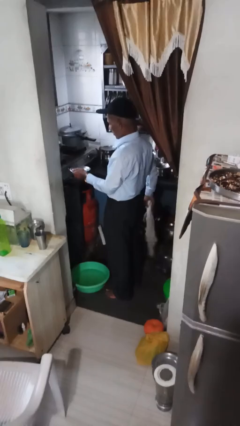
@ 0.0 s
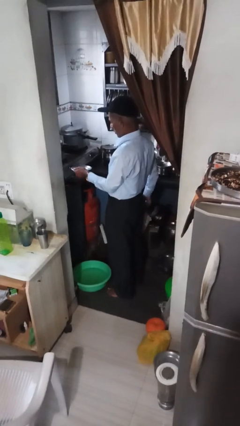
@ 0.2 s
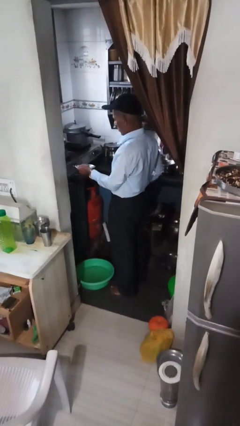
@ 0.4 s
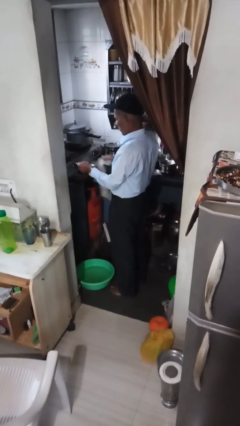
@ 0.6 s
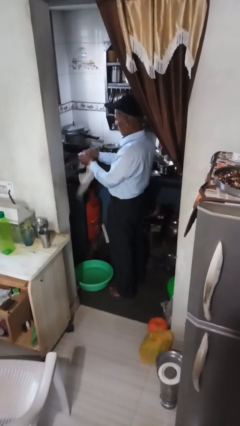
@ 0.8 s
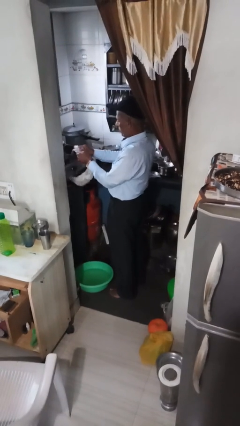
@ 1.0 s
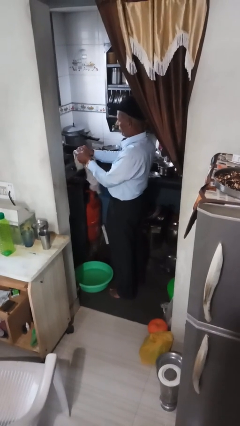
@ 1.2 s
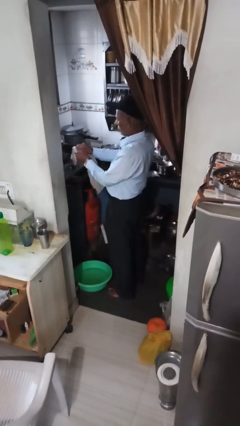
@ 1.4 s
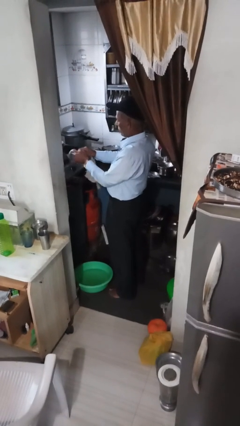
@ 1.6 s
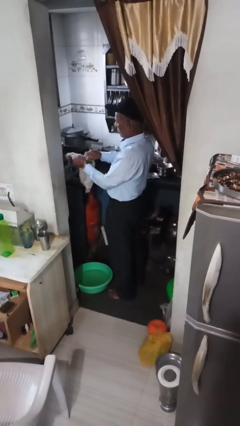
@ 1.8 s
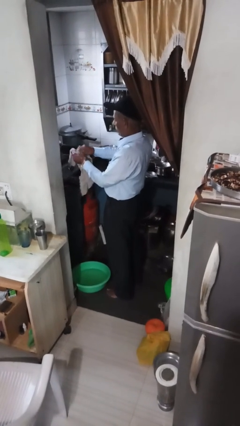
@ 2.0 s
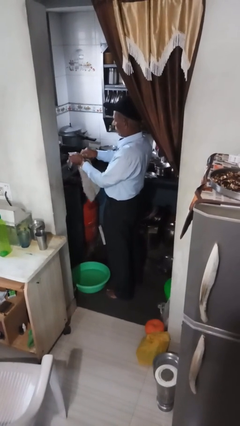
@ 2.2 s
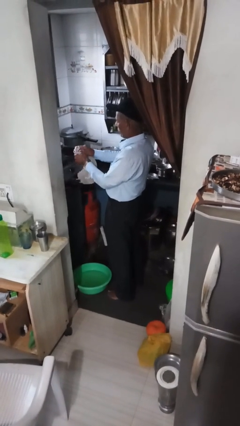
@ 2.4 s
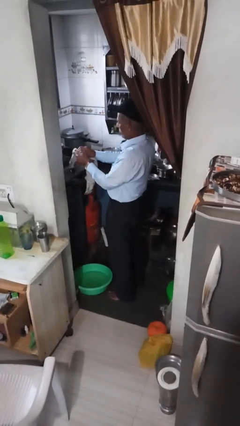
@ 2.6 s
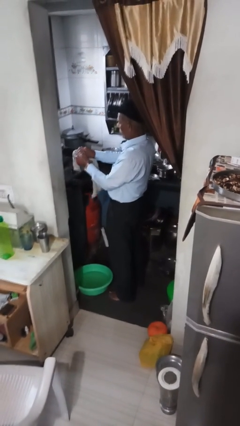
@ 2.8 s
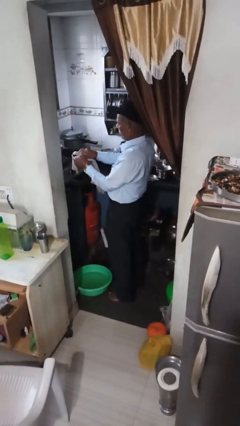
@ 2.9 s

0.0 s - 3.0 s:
person dries dish

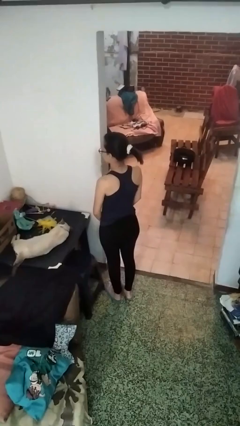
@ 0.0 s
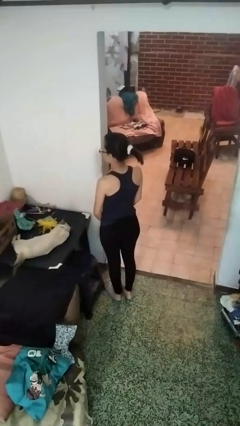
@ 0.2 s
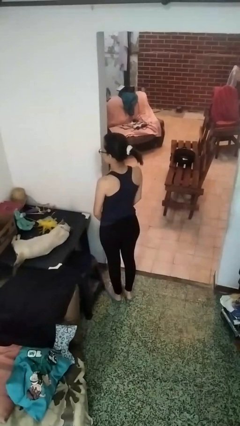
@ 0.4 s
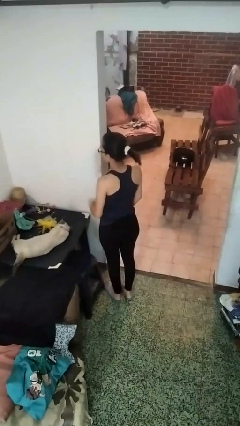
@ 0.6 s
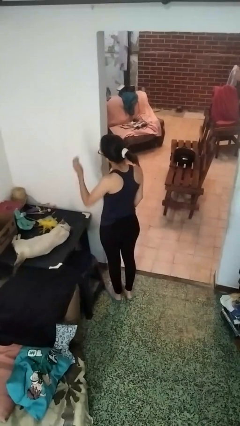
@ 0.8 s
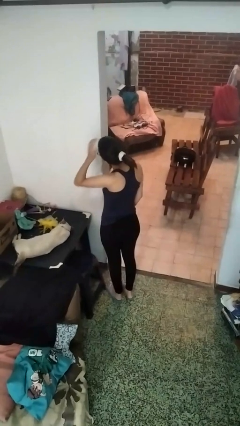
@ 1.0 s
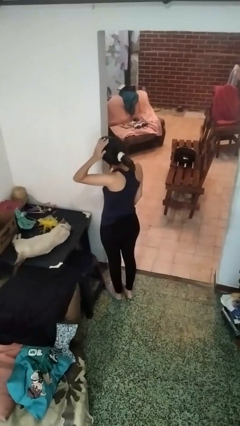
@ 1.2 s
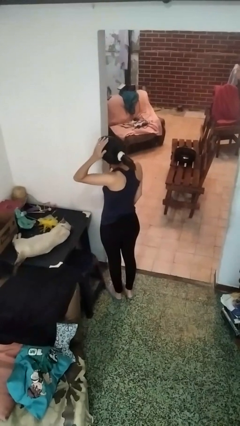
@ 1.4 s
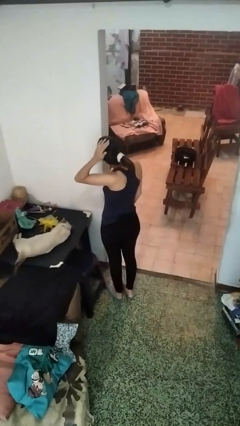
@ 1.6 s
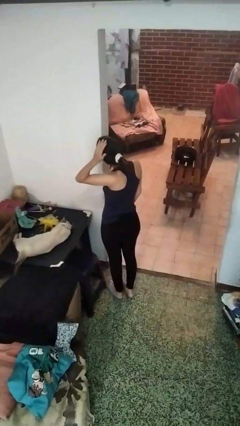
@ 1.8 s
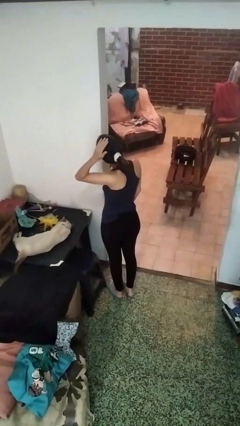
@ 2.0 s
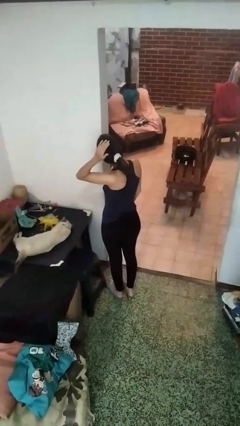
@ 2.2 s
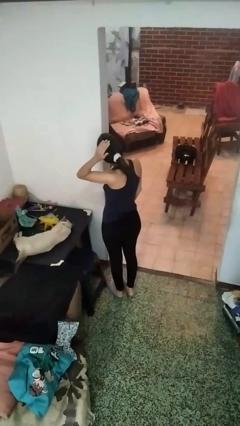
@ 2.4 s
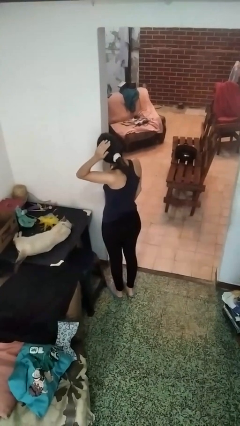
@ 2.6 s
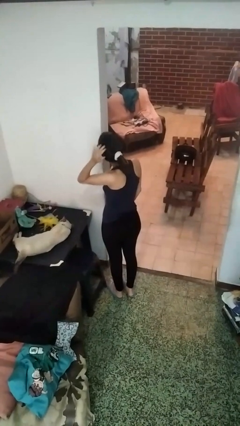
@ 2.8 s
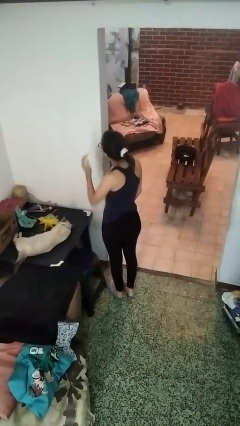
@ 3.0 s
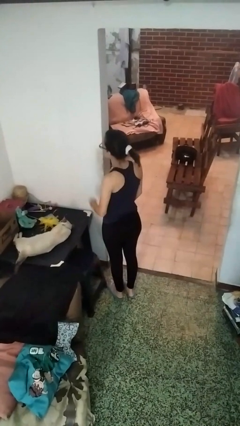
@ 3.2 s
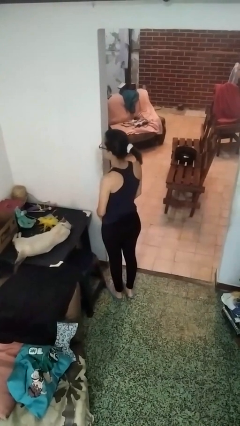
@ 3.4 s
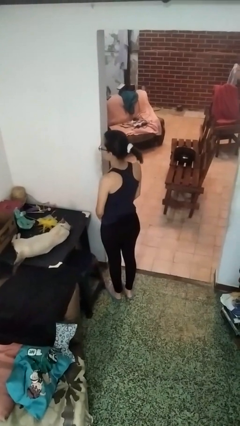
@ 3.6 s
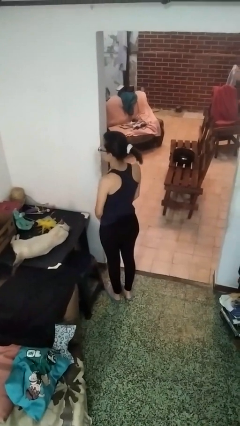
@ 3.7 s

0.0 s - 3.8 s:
person pats head

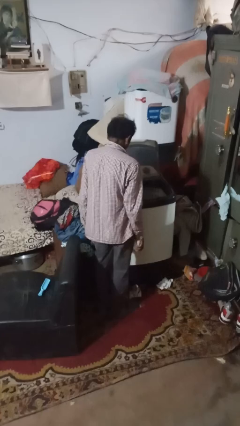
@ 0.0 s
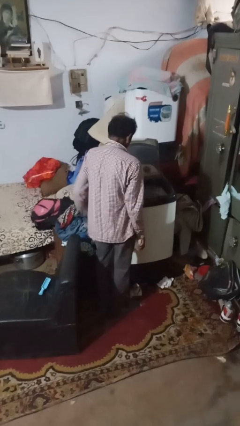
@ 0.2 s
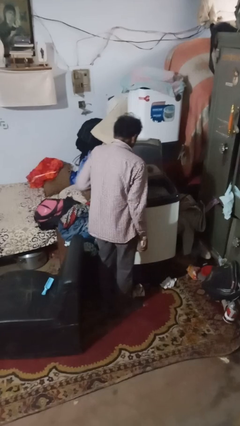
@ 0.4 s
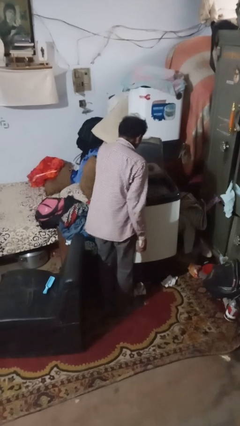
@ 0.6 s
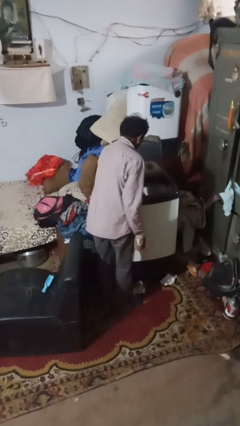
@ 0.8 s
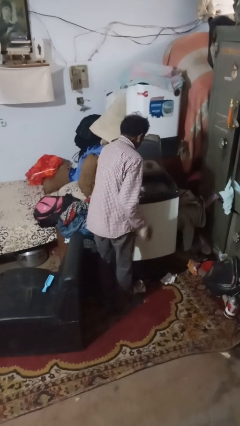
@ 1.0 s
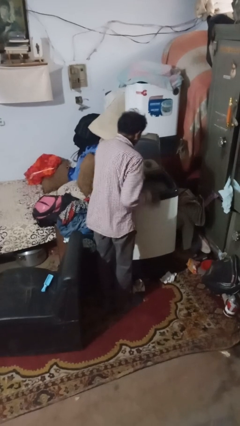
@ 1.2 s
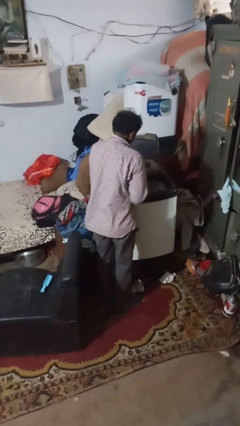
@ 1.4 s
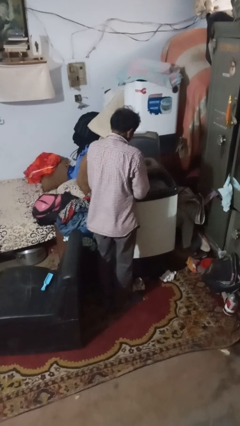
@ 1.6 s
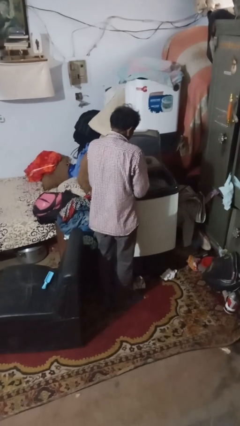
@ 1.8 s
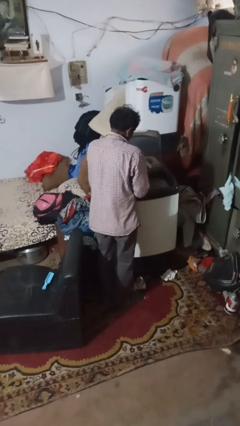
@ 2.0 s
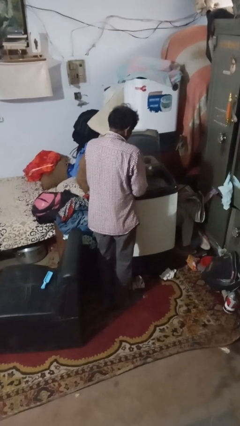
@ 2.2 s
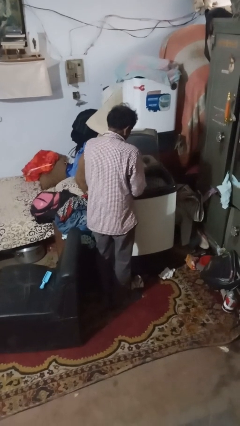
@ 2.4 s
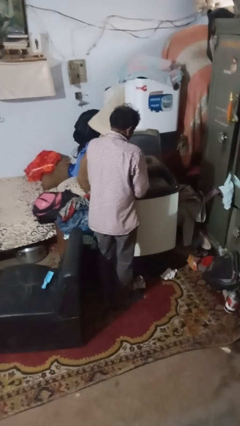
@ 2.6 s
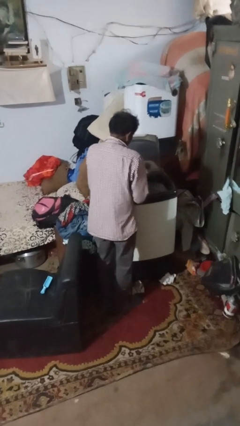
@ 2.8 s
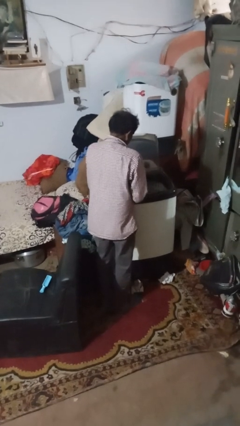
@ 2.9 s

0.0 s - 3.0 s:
person cleans dryer lint trap

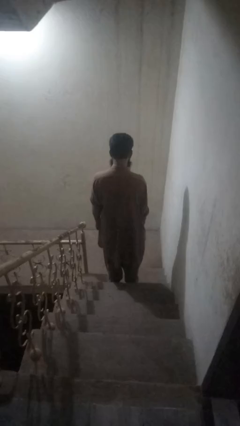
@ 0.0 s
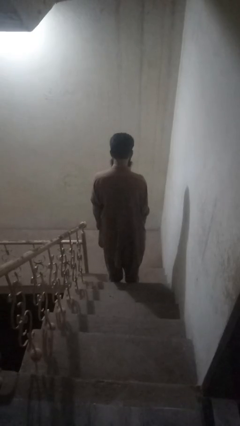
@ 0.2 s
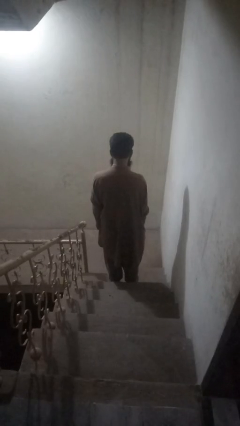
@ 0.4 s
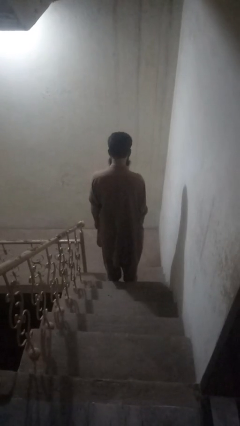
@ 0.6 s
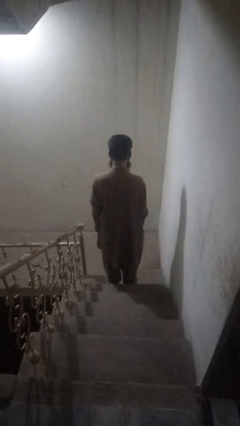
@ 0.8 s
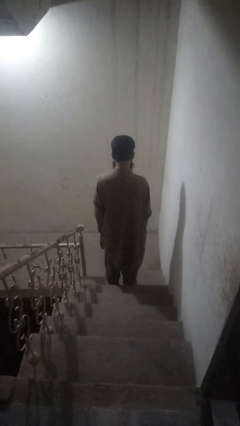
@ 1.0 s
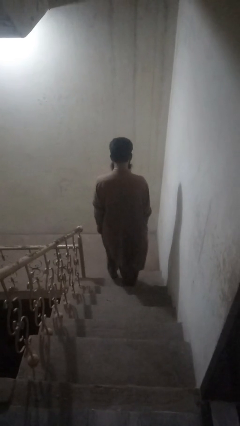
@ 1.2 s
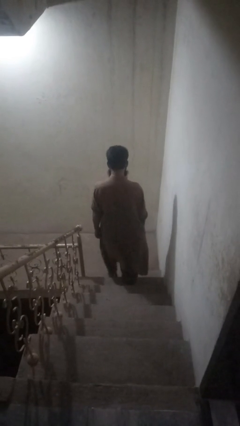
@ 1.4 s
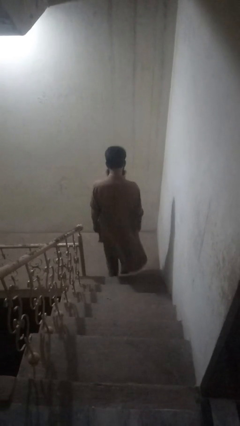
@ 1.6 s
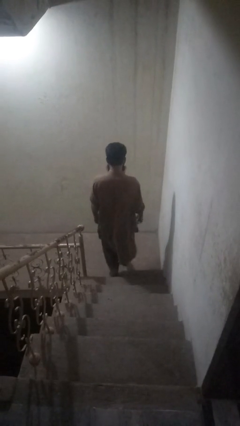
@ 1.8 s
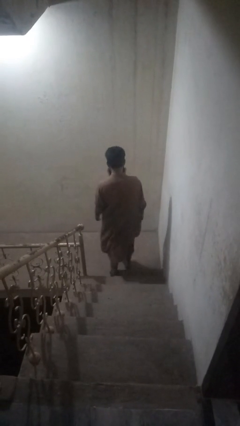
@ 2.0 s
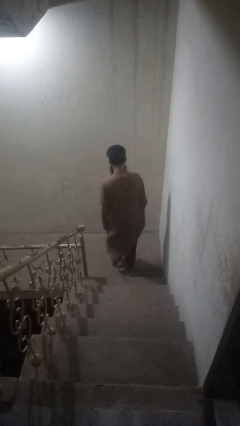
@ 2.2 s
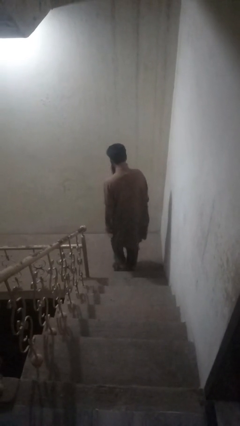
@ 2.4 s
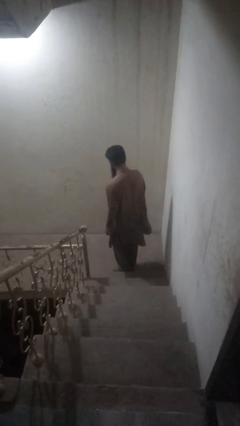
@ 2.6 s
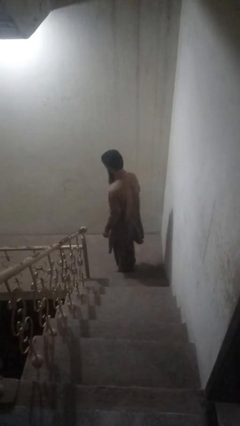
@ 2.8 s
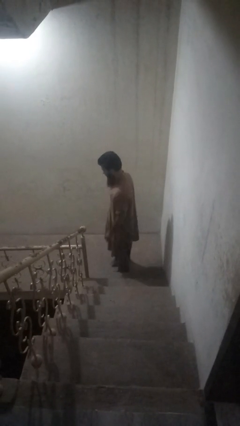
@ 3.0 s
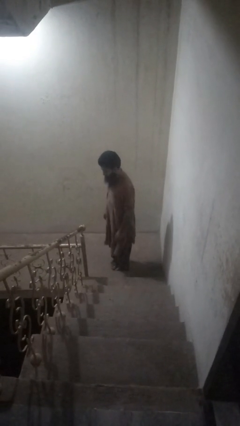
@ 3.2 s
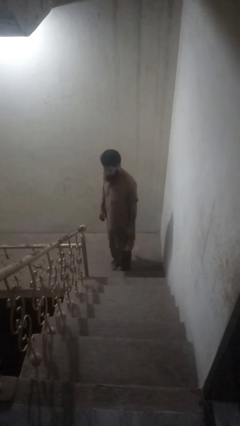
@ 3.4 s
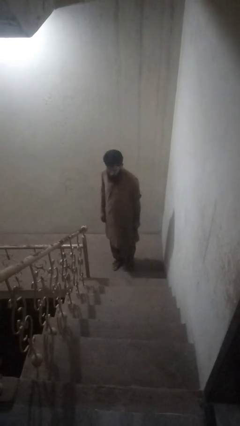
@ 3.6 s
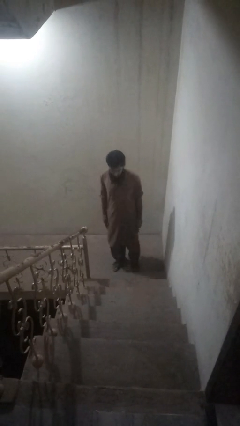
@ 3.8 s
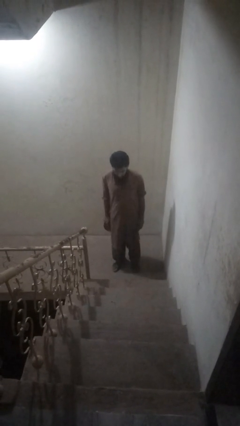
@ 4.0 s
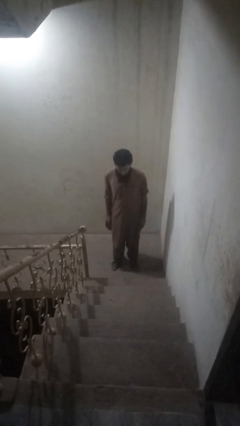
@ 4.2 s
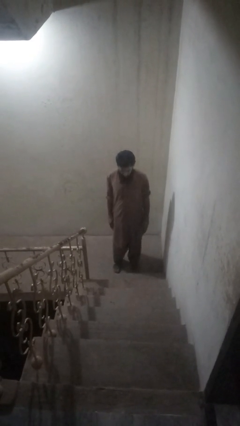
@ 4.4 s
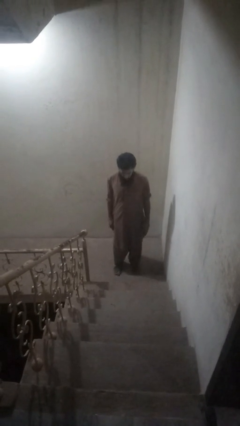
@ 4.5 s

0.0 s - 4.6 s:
person climbs down stairs

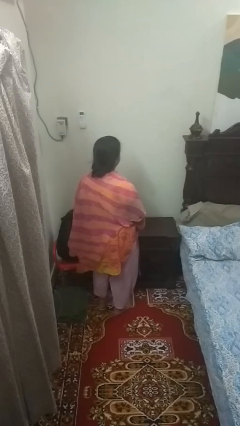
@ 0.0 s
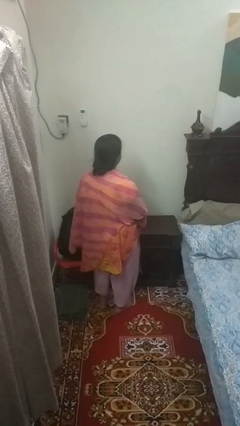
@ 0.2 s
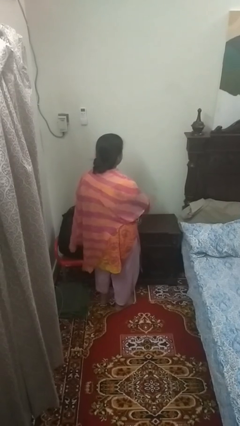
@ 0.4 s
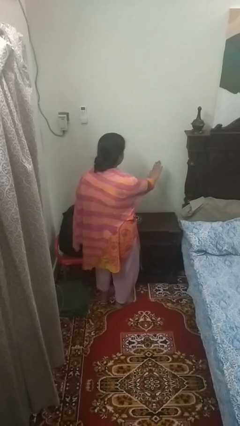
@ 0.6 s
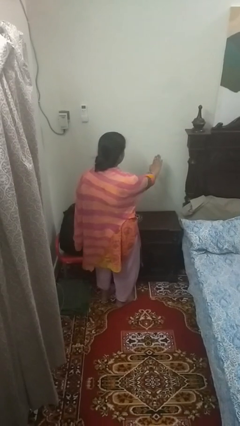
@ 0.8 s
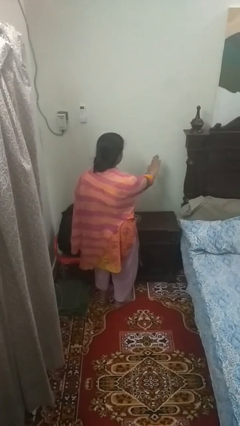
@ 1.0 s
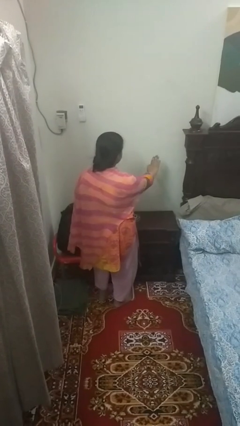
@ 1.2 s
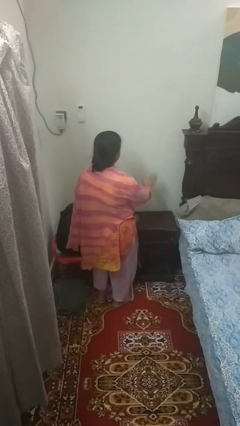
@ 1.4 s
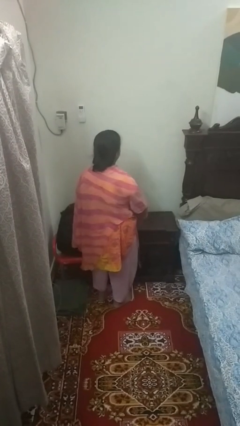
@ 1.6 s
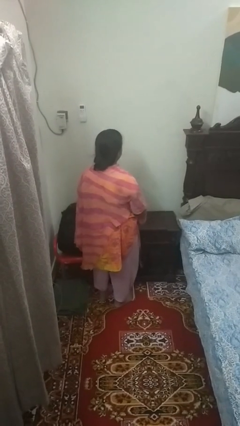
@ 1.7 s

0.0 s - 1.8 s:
person gestures stop

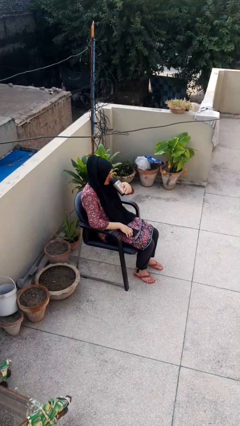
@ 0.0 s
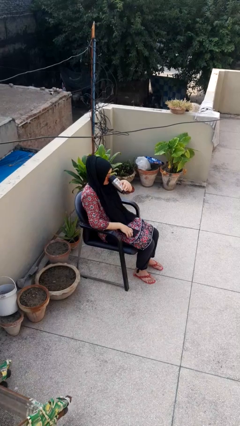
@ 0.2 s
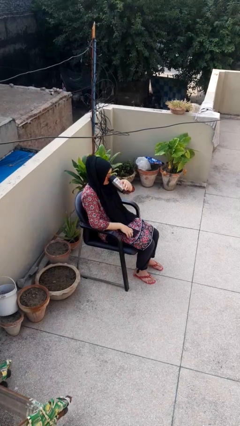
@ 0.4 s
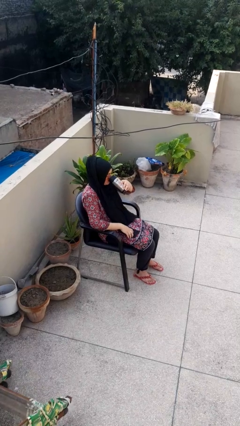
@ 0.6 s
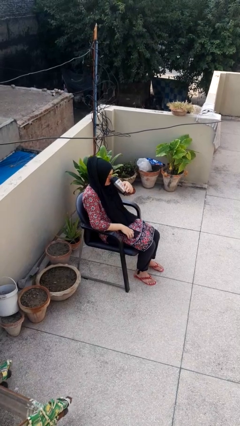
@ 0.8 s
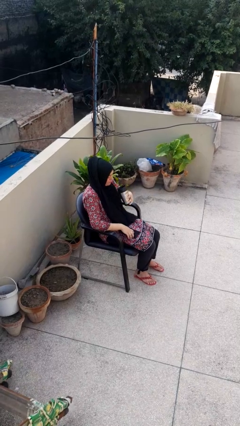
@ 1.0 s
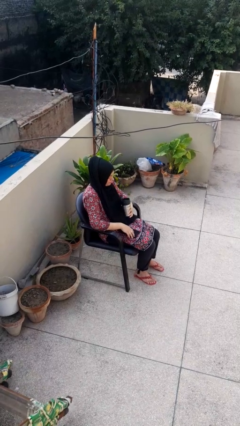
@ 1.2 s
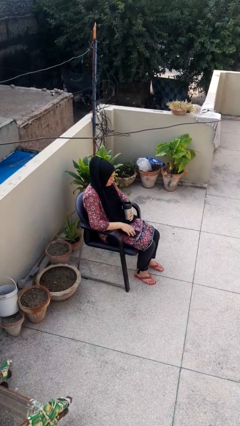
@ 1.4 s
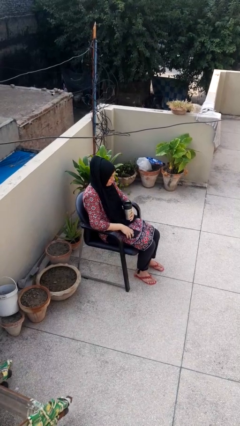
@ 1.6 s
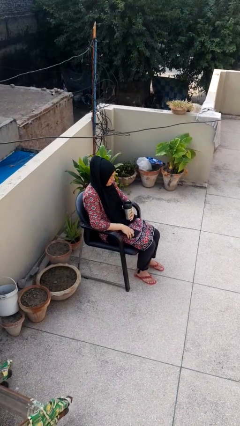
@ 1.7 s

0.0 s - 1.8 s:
person drinks from beverage can
